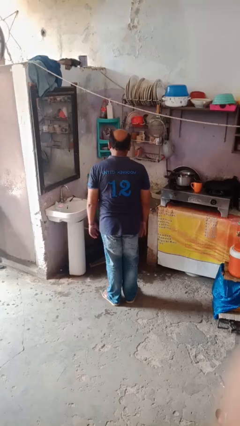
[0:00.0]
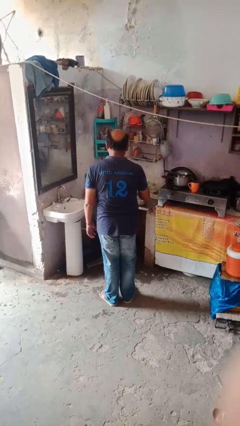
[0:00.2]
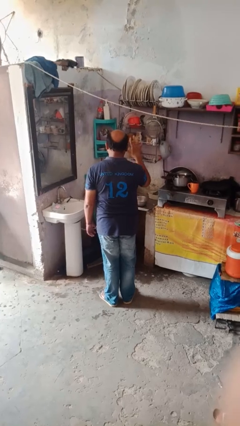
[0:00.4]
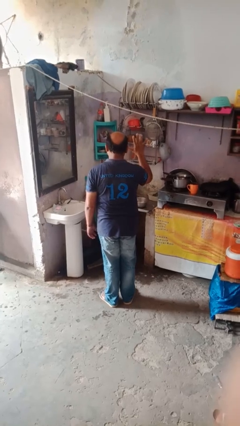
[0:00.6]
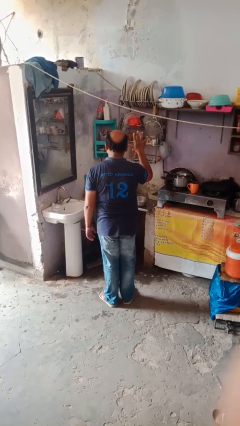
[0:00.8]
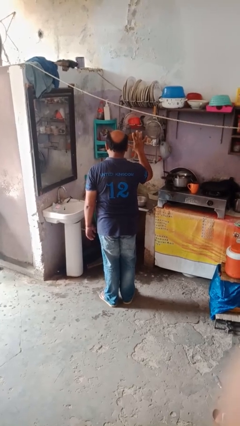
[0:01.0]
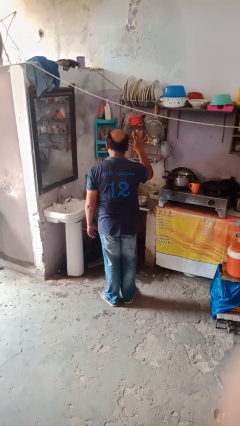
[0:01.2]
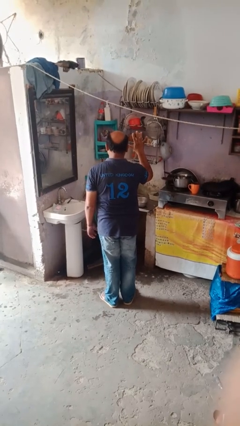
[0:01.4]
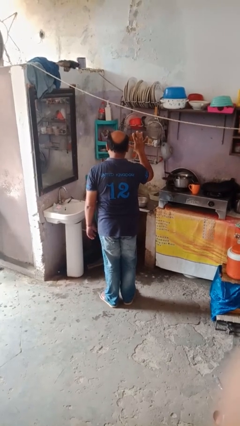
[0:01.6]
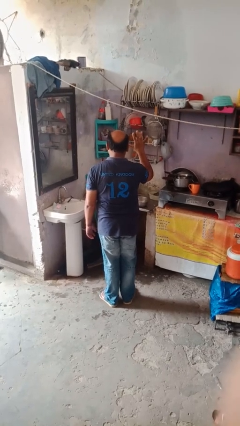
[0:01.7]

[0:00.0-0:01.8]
person gestures number five

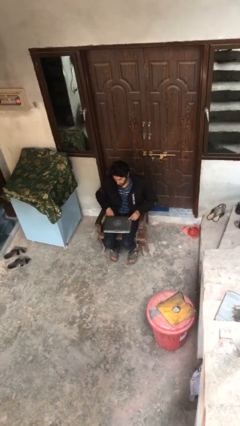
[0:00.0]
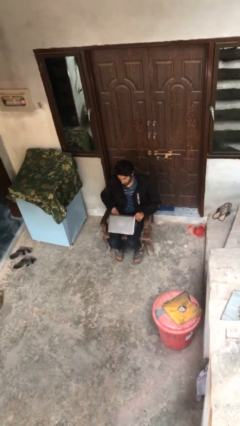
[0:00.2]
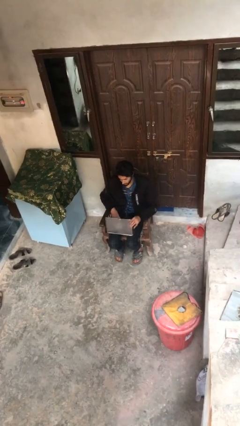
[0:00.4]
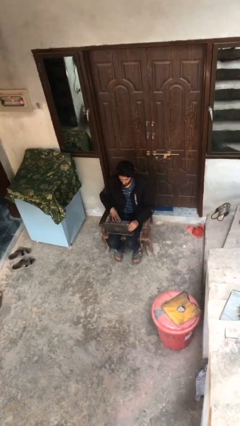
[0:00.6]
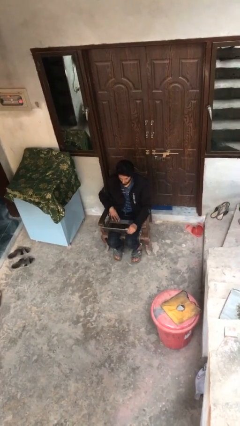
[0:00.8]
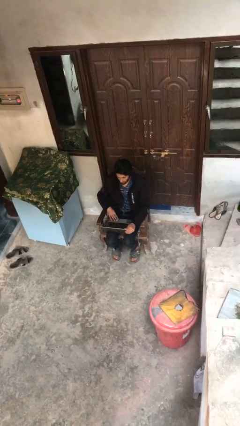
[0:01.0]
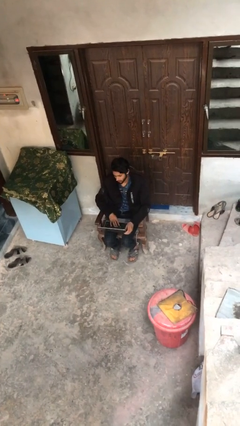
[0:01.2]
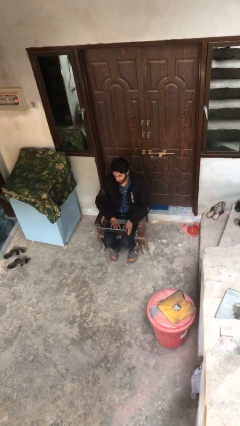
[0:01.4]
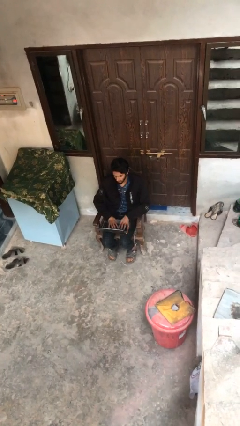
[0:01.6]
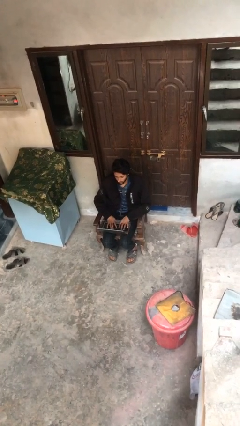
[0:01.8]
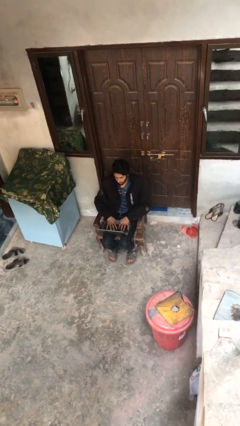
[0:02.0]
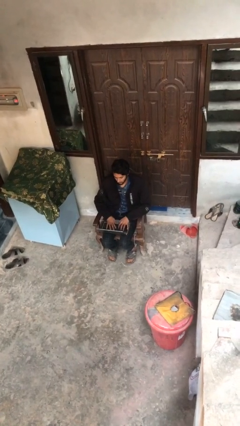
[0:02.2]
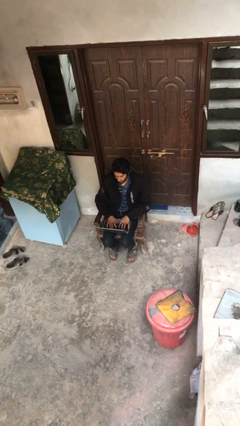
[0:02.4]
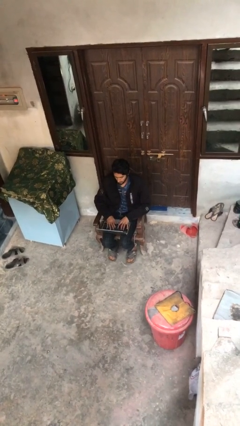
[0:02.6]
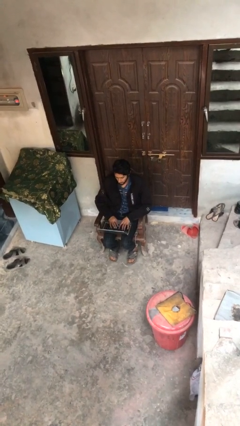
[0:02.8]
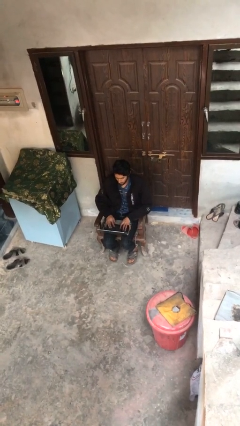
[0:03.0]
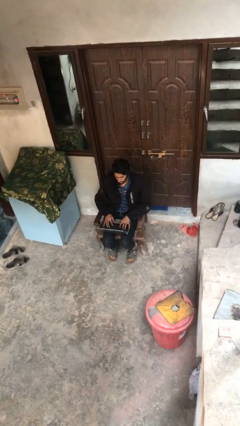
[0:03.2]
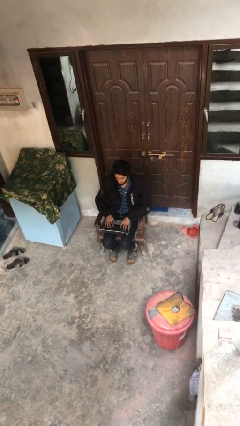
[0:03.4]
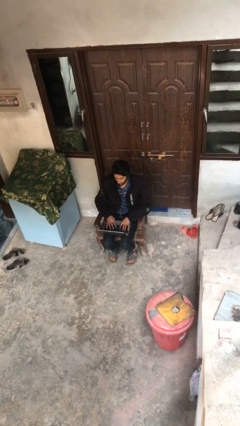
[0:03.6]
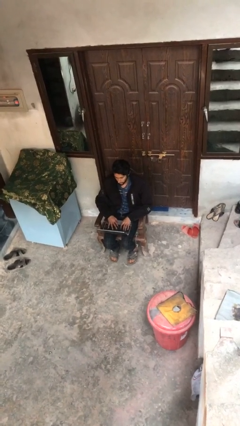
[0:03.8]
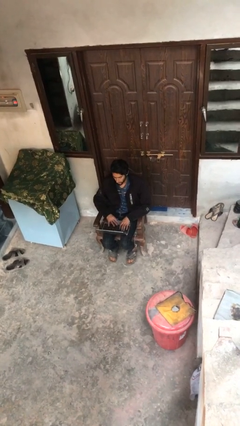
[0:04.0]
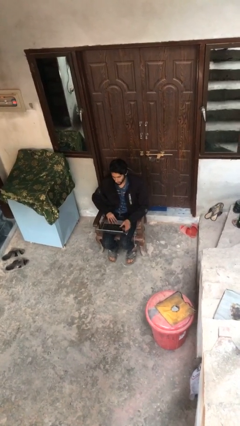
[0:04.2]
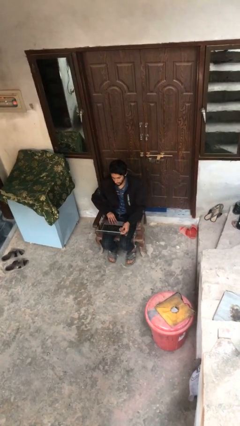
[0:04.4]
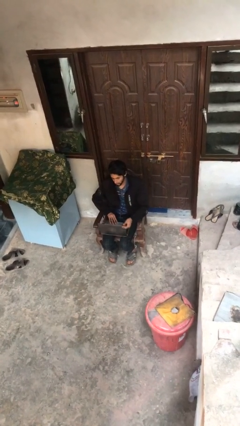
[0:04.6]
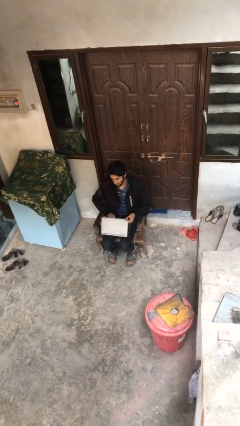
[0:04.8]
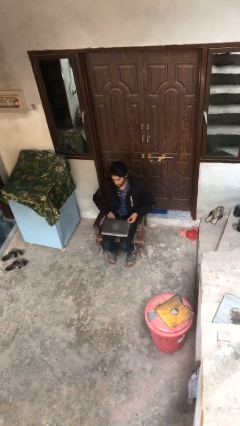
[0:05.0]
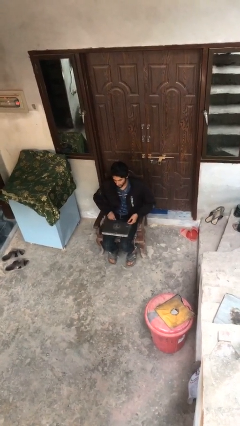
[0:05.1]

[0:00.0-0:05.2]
person interacts with laptop

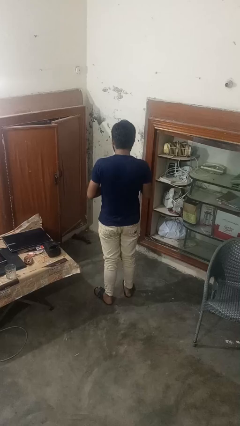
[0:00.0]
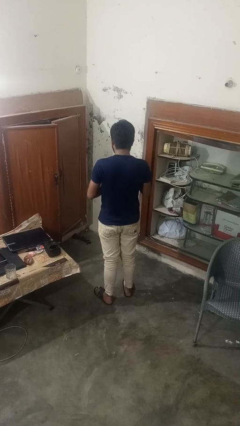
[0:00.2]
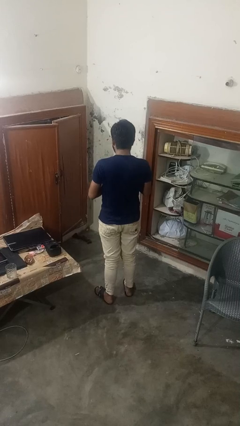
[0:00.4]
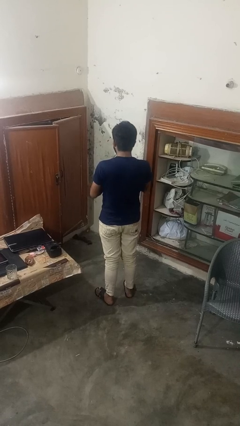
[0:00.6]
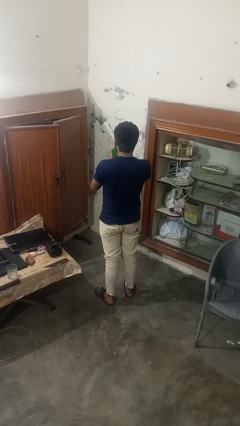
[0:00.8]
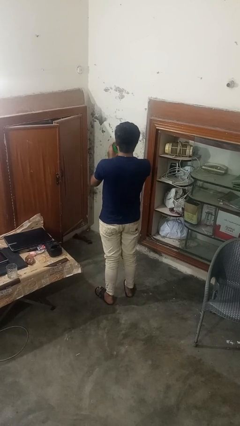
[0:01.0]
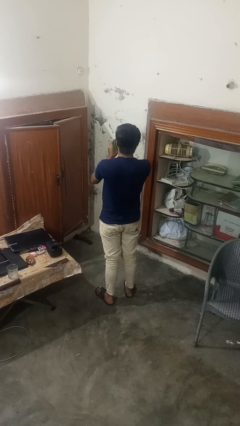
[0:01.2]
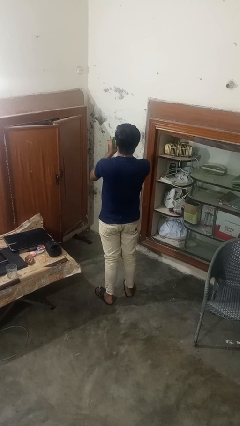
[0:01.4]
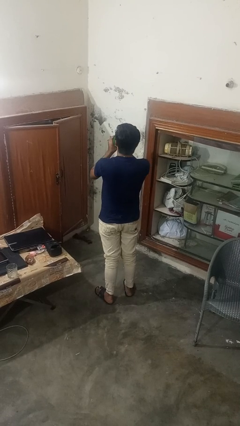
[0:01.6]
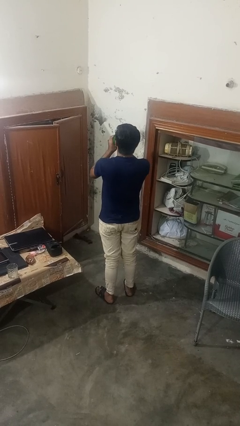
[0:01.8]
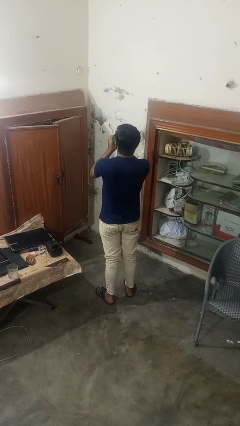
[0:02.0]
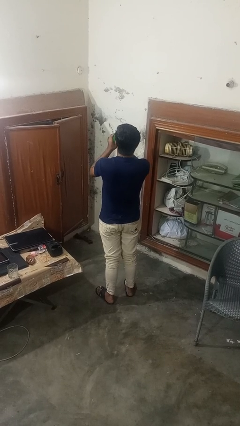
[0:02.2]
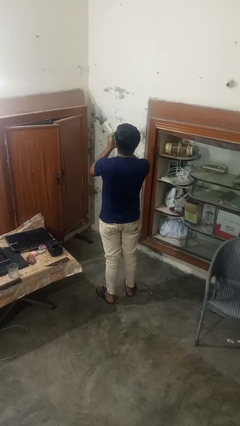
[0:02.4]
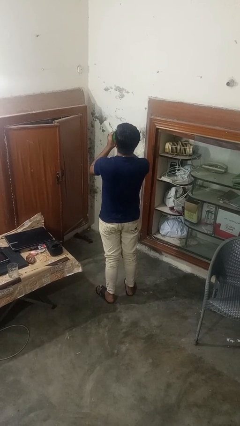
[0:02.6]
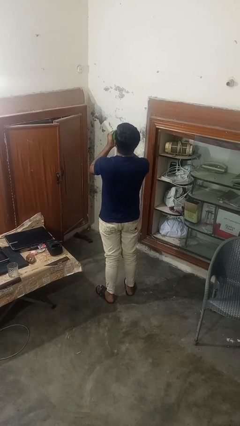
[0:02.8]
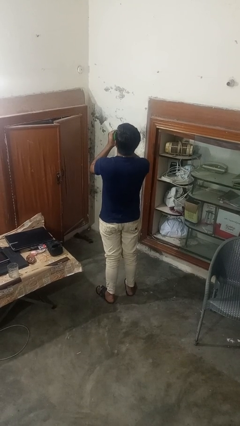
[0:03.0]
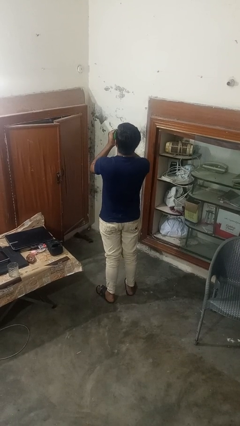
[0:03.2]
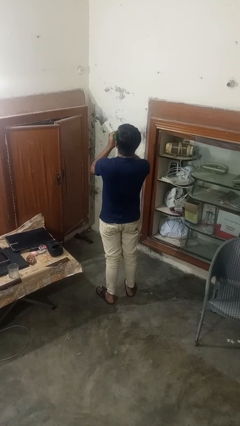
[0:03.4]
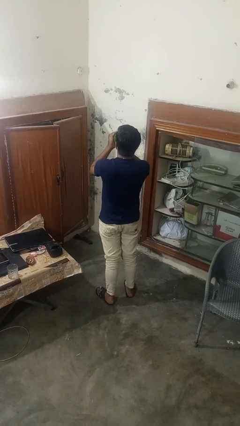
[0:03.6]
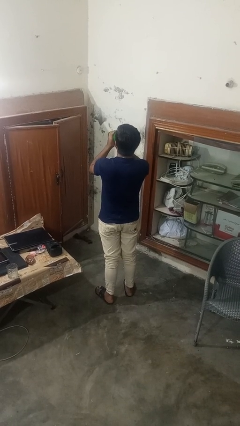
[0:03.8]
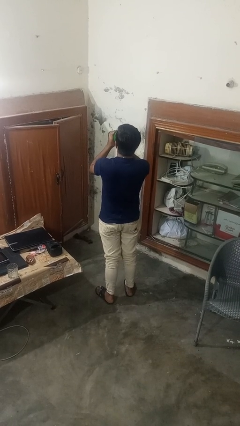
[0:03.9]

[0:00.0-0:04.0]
person drinks from bottle

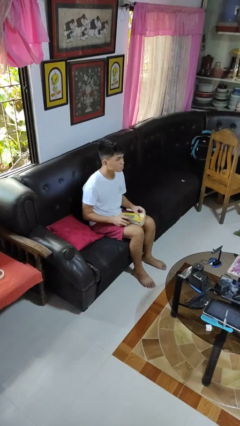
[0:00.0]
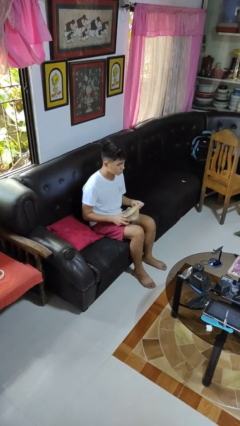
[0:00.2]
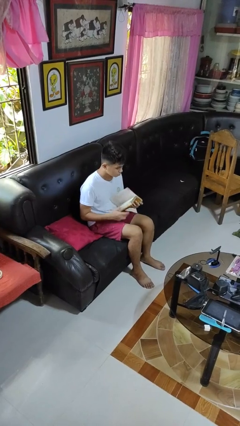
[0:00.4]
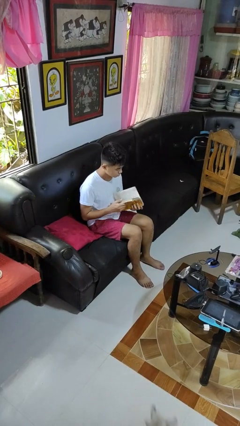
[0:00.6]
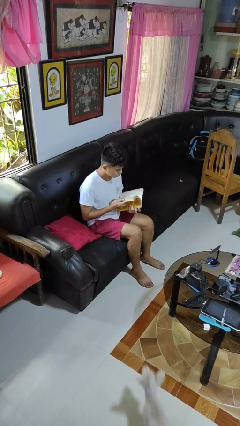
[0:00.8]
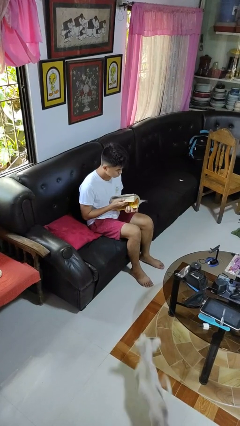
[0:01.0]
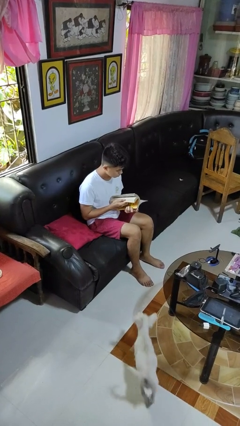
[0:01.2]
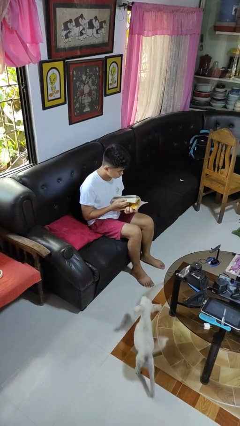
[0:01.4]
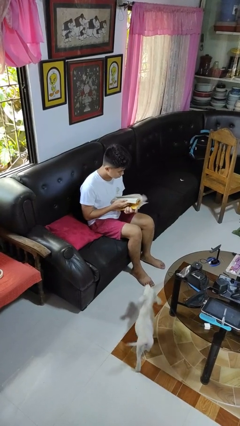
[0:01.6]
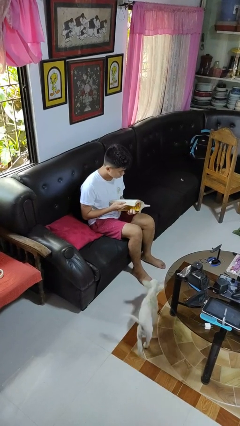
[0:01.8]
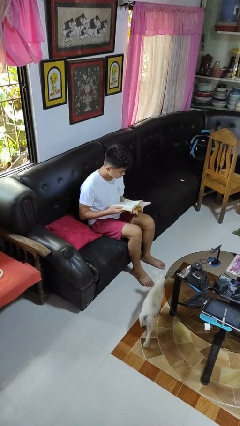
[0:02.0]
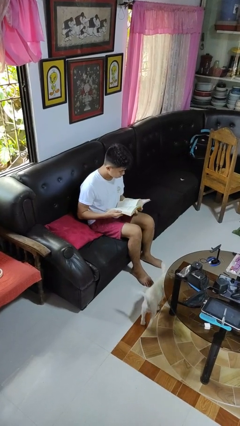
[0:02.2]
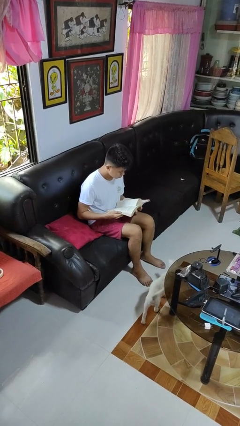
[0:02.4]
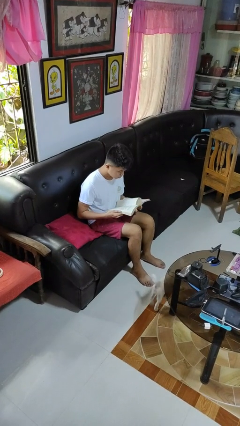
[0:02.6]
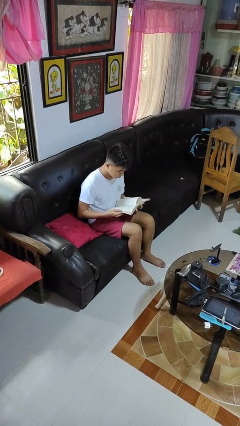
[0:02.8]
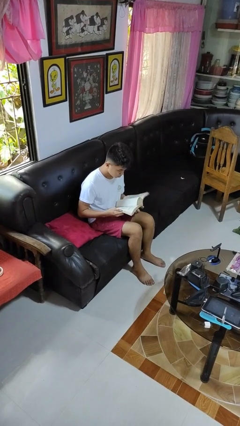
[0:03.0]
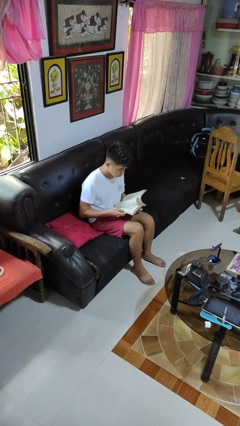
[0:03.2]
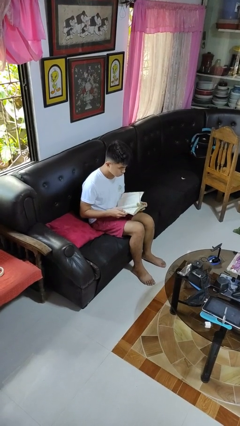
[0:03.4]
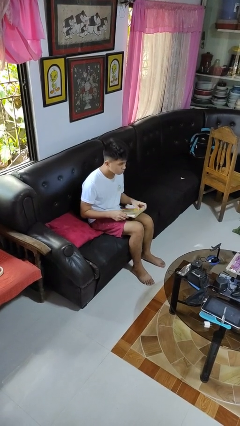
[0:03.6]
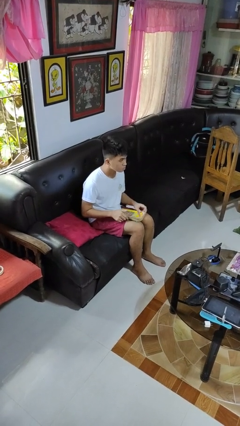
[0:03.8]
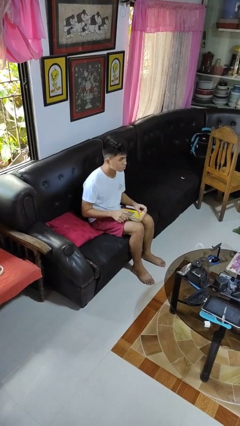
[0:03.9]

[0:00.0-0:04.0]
person reads book

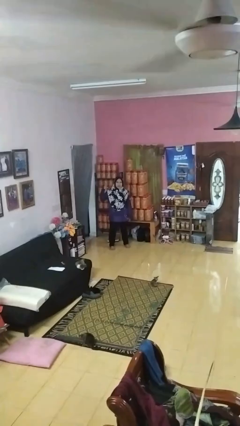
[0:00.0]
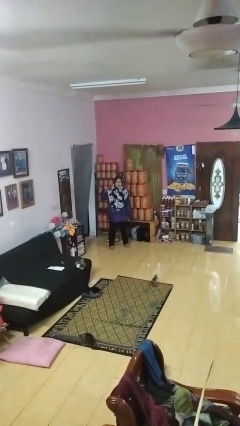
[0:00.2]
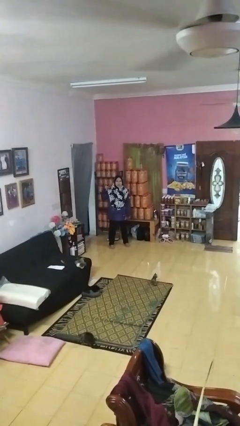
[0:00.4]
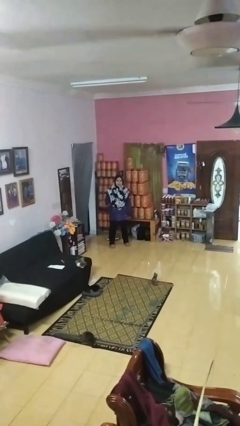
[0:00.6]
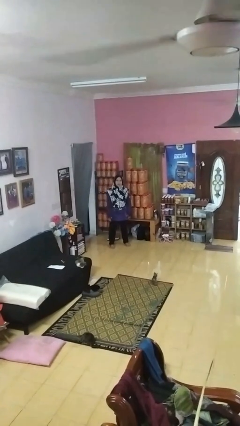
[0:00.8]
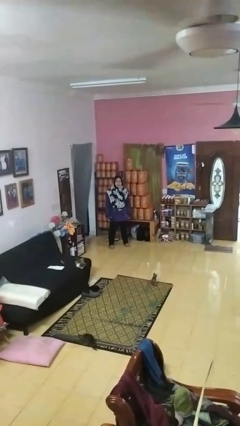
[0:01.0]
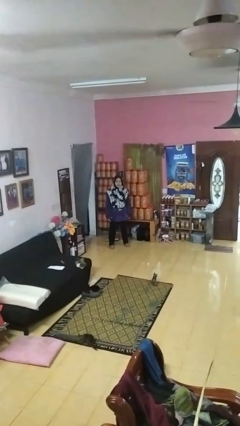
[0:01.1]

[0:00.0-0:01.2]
person gestures cut

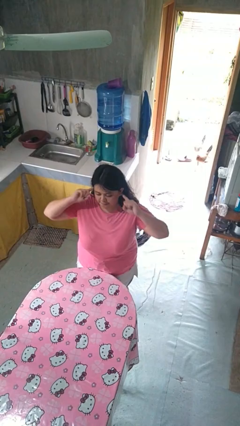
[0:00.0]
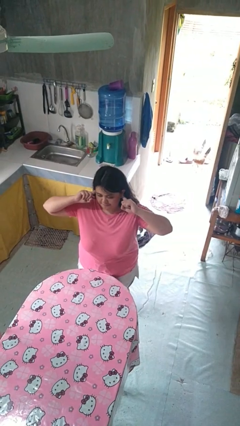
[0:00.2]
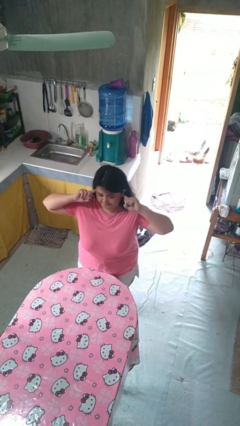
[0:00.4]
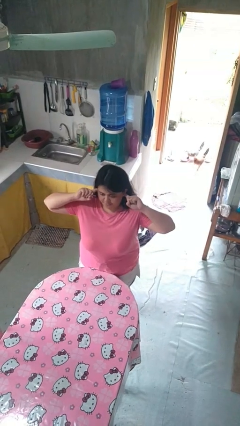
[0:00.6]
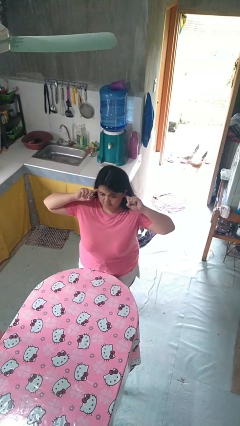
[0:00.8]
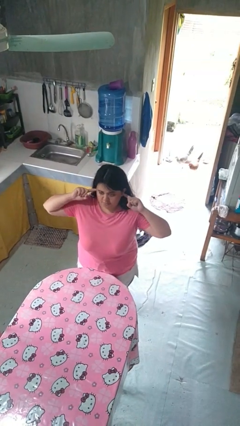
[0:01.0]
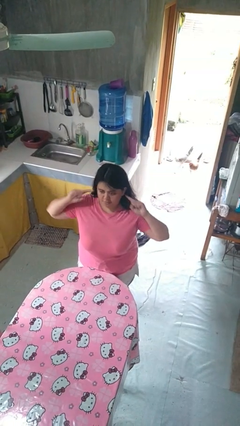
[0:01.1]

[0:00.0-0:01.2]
person puts fingers in ear

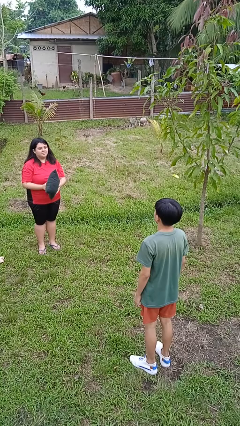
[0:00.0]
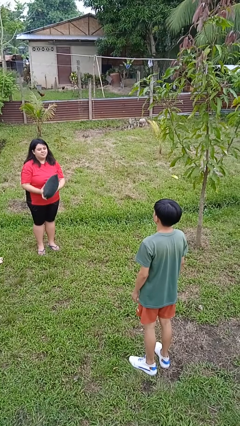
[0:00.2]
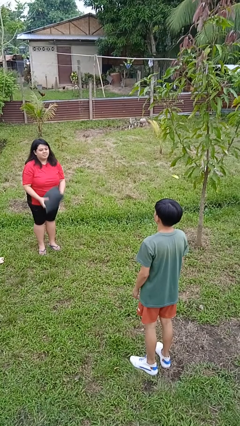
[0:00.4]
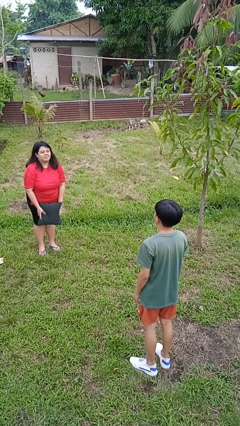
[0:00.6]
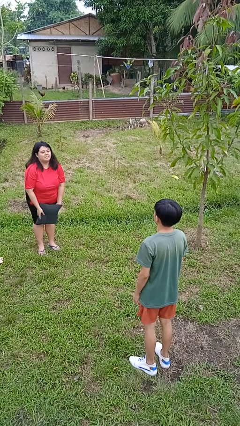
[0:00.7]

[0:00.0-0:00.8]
person throws object to person
